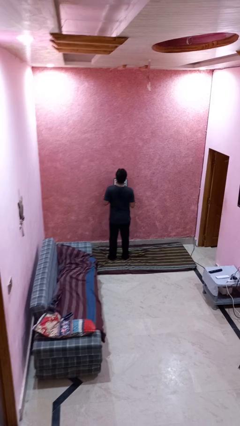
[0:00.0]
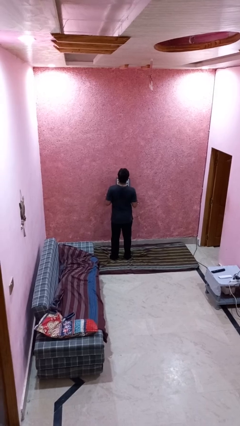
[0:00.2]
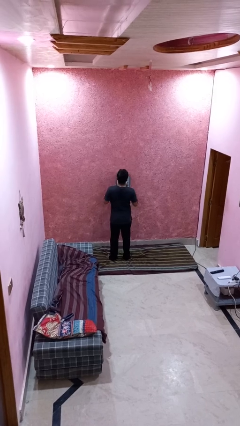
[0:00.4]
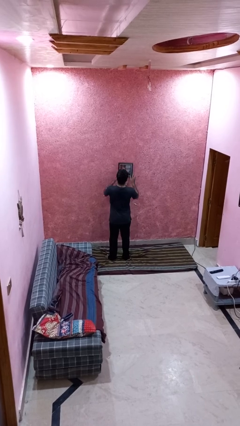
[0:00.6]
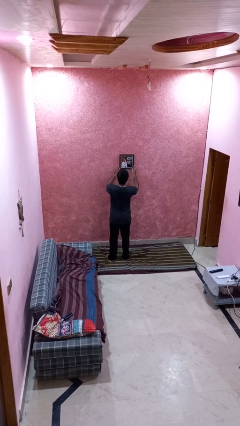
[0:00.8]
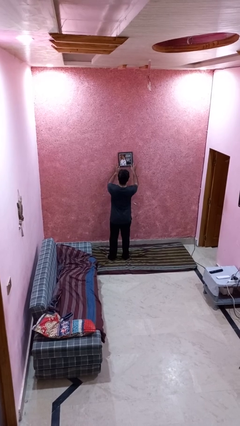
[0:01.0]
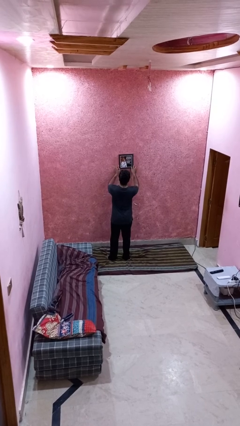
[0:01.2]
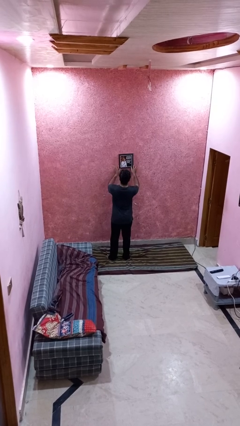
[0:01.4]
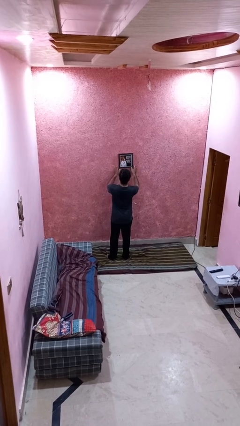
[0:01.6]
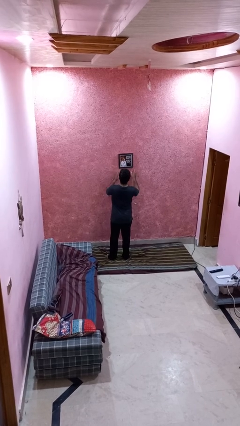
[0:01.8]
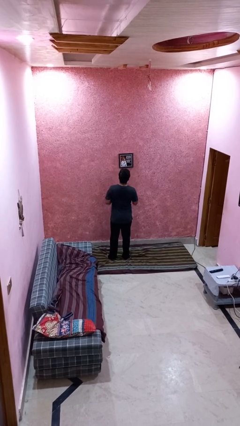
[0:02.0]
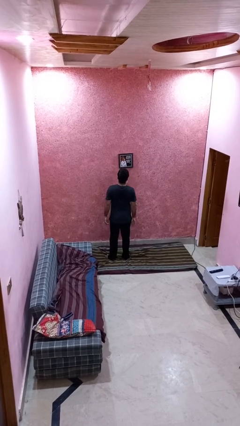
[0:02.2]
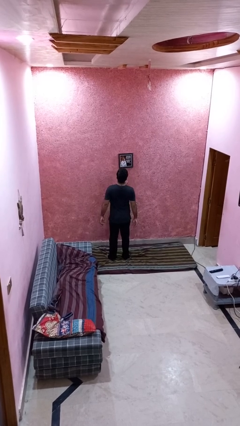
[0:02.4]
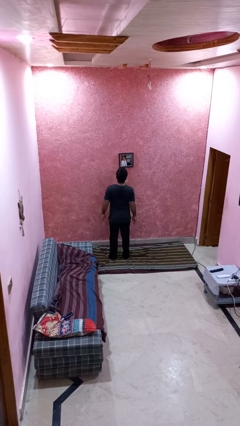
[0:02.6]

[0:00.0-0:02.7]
person puts up picture frame

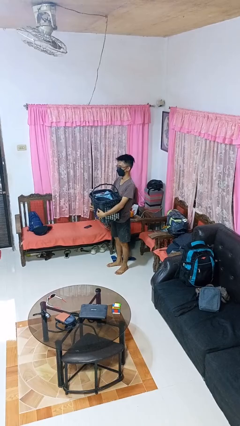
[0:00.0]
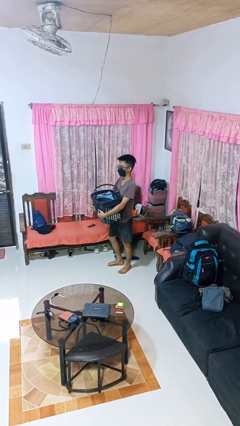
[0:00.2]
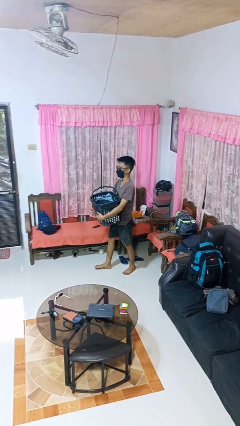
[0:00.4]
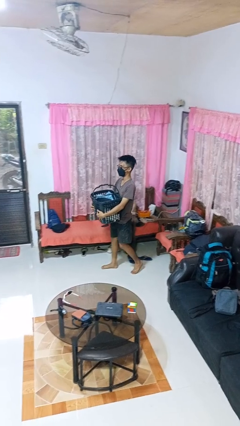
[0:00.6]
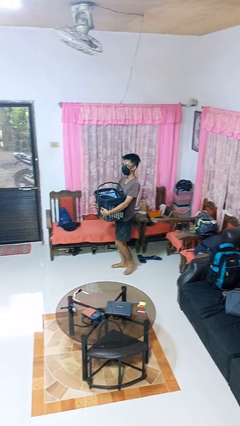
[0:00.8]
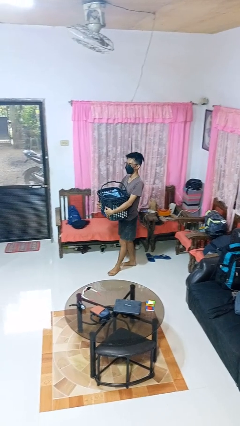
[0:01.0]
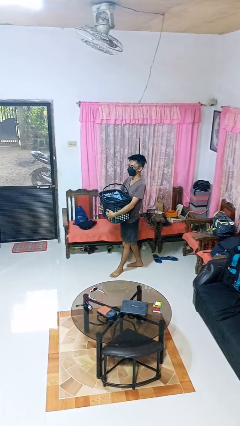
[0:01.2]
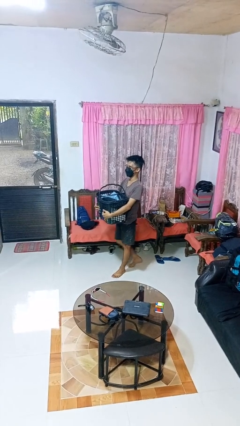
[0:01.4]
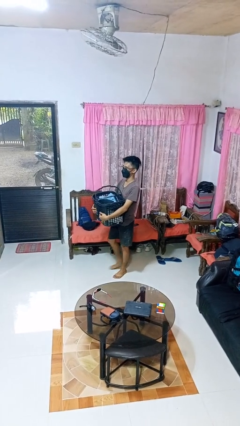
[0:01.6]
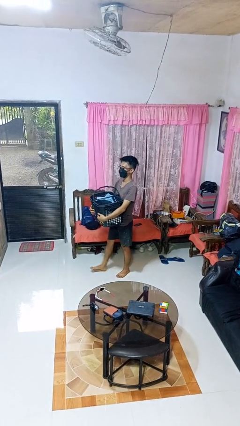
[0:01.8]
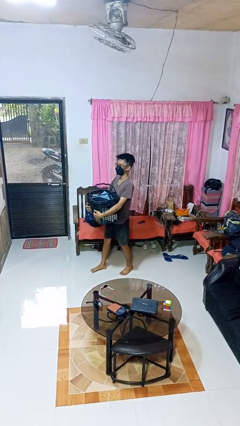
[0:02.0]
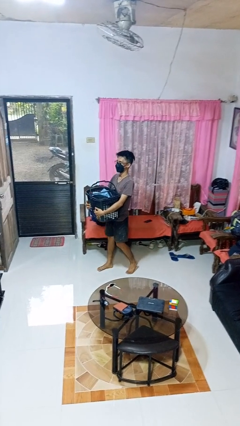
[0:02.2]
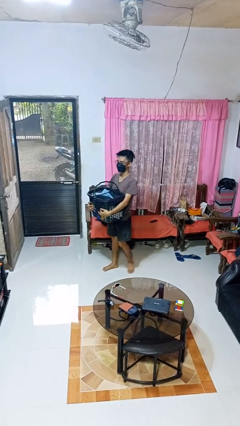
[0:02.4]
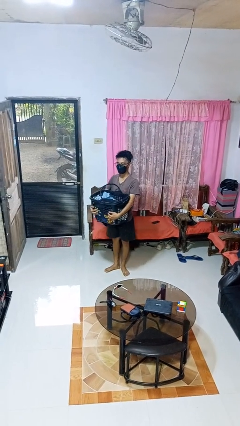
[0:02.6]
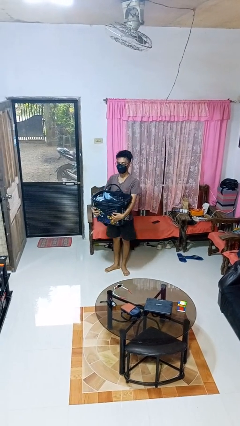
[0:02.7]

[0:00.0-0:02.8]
person carries laundry basket

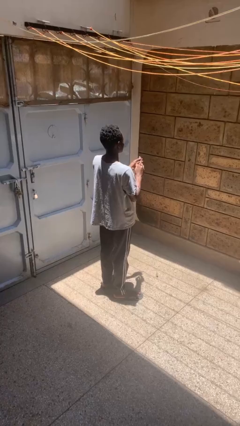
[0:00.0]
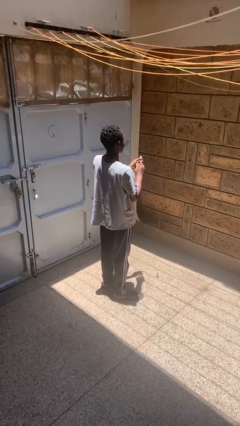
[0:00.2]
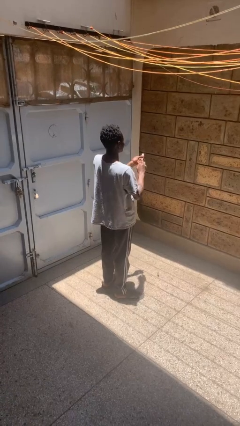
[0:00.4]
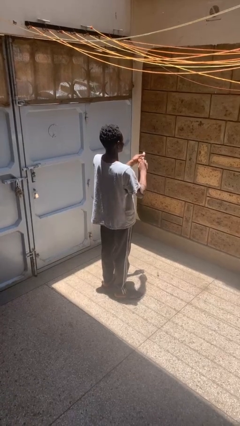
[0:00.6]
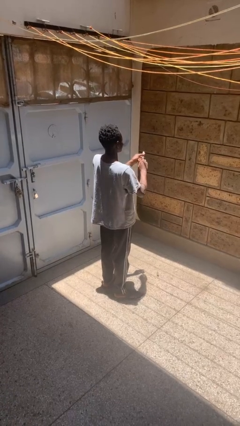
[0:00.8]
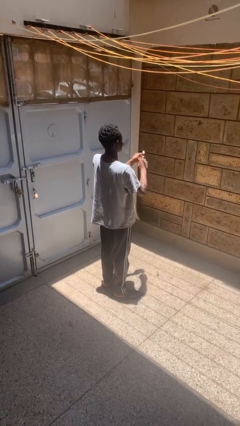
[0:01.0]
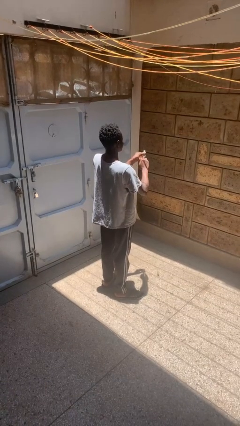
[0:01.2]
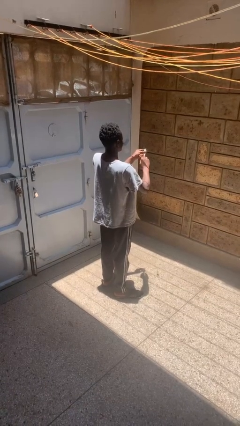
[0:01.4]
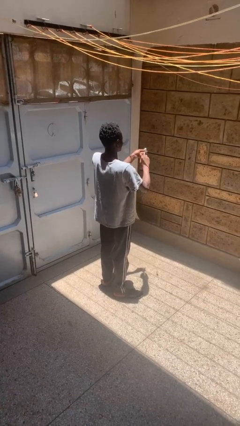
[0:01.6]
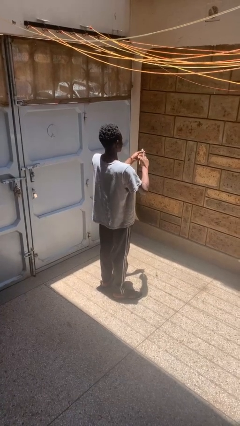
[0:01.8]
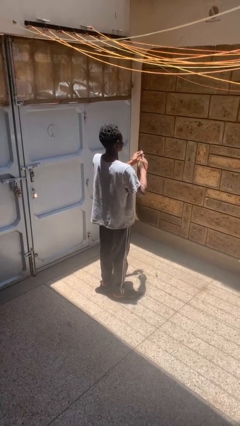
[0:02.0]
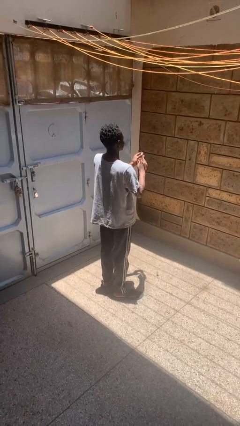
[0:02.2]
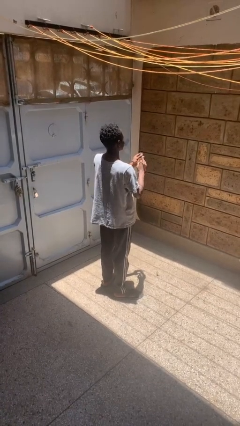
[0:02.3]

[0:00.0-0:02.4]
person clips fingernails

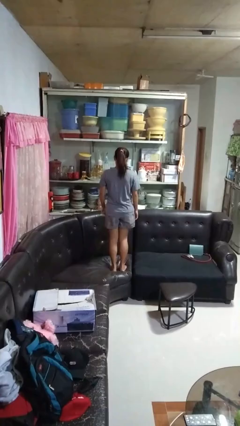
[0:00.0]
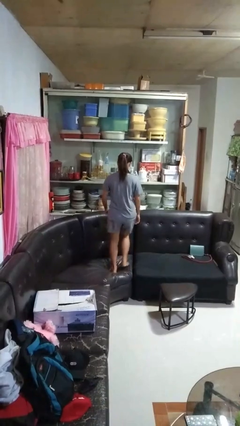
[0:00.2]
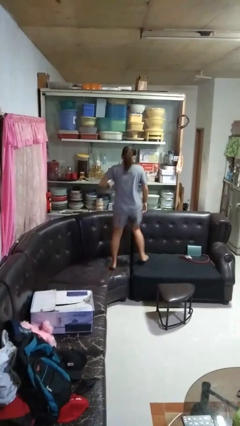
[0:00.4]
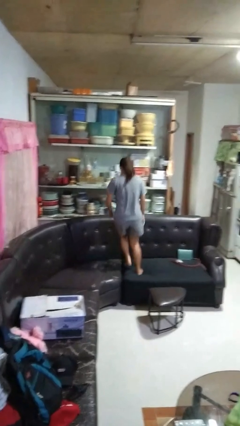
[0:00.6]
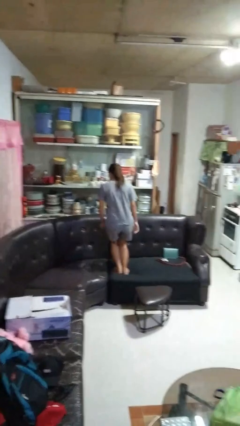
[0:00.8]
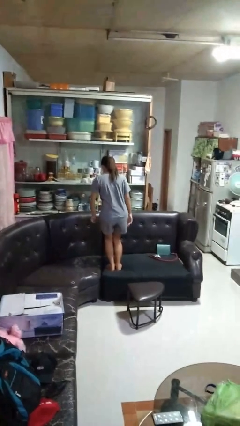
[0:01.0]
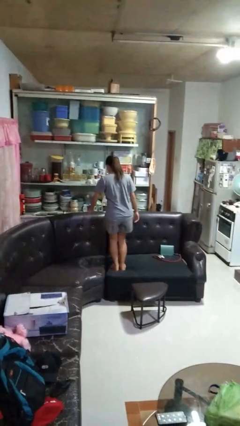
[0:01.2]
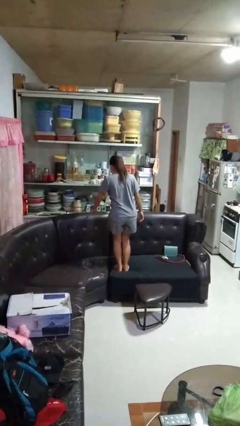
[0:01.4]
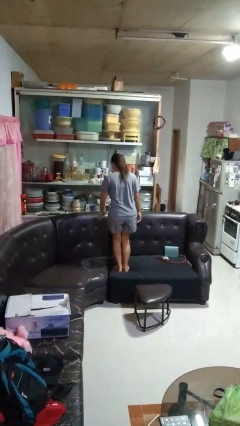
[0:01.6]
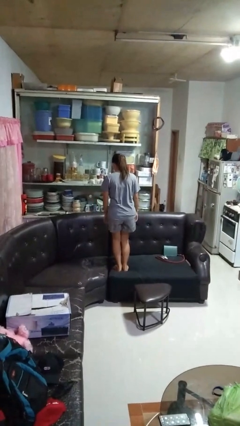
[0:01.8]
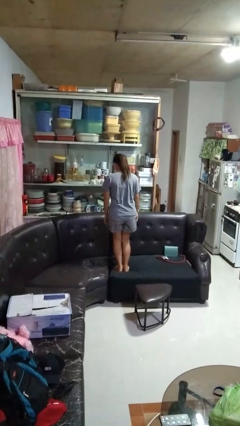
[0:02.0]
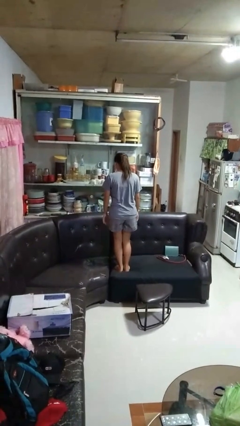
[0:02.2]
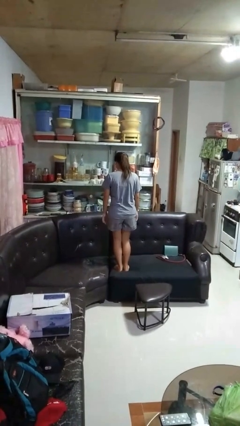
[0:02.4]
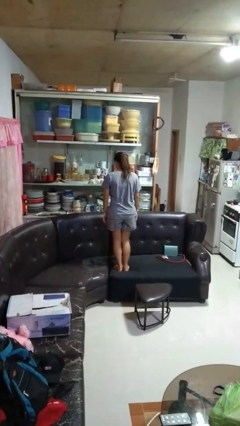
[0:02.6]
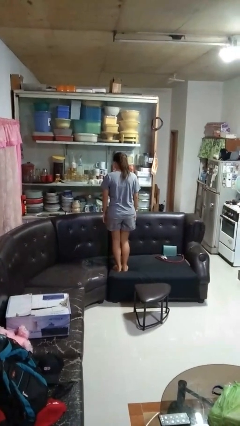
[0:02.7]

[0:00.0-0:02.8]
person jumps on couch

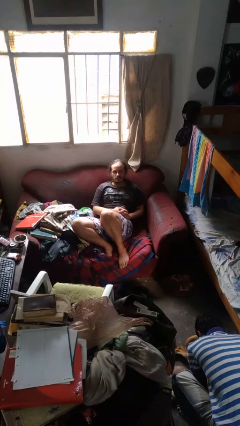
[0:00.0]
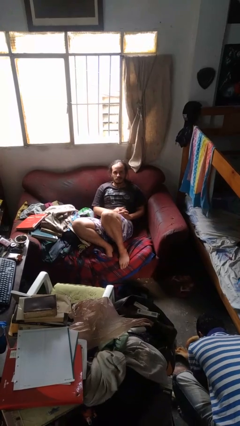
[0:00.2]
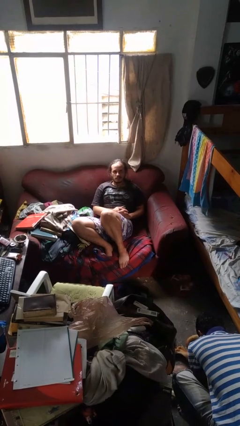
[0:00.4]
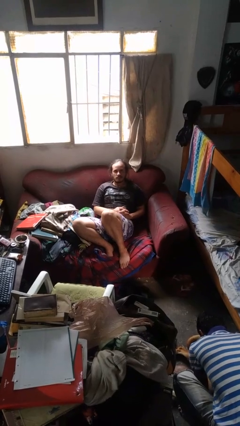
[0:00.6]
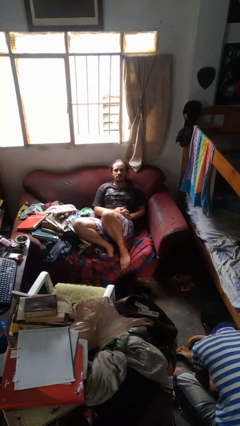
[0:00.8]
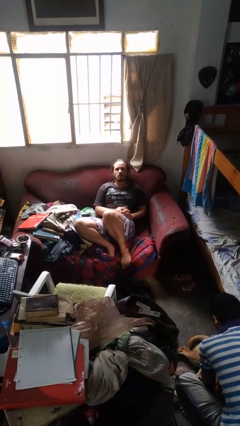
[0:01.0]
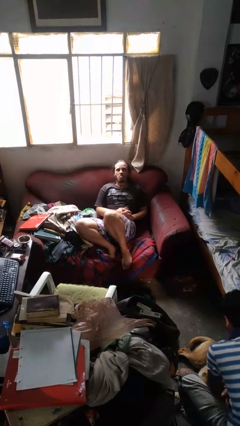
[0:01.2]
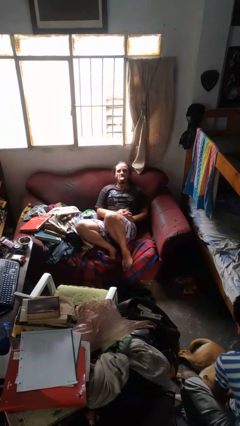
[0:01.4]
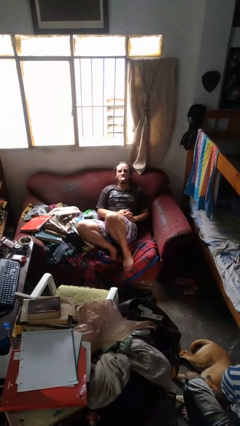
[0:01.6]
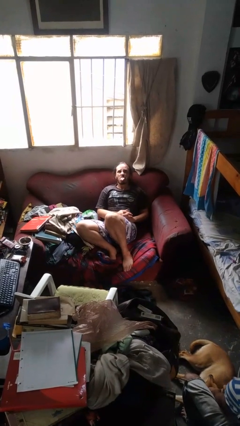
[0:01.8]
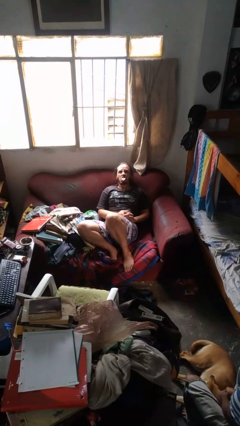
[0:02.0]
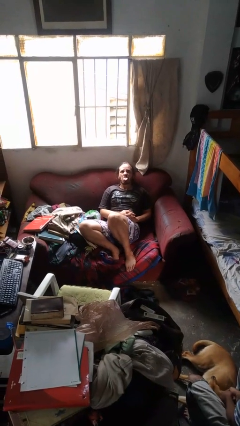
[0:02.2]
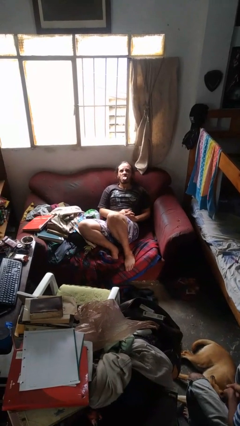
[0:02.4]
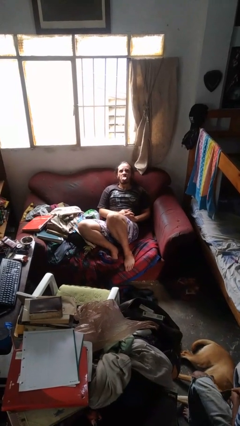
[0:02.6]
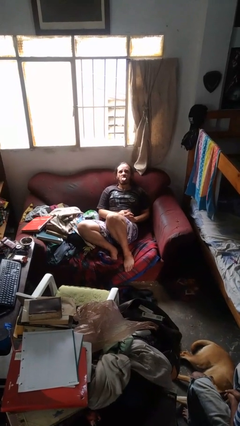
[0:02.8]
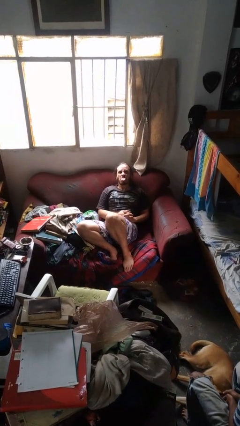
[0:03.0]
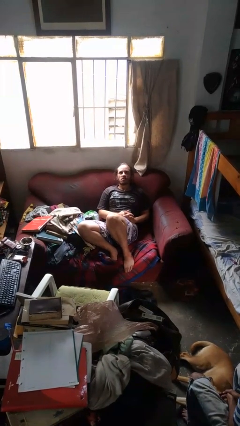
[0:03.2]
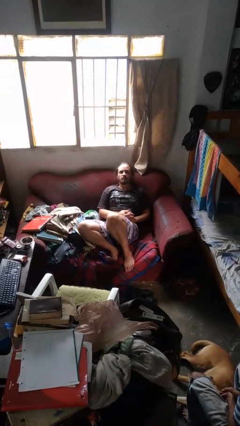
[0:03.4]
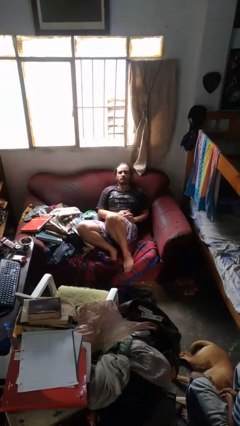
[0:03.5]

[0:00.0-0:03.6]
person sticks out tongue

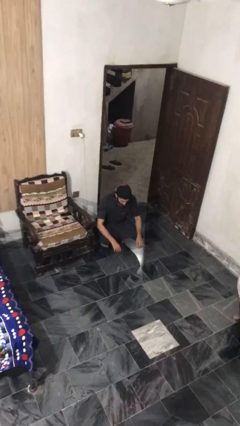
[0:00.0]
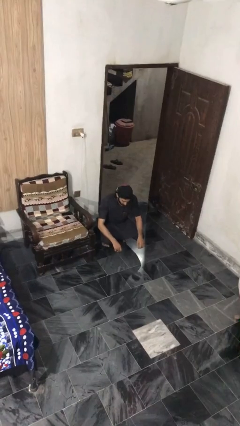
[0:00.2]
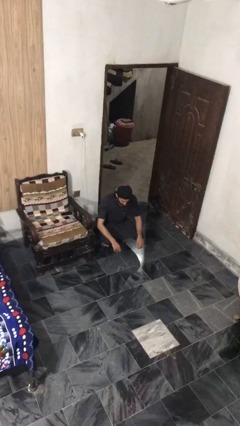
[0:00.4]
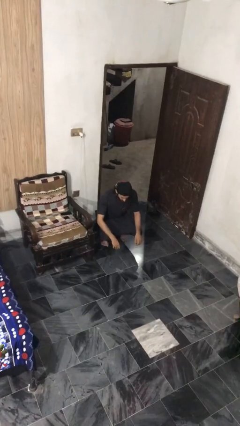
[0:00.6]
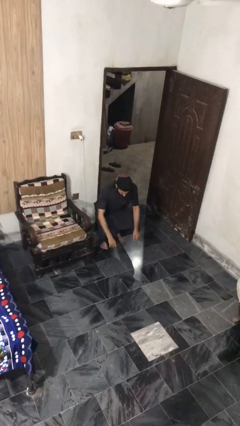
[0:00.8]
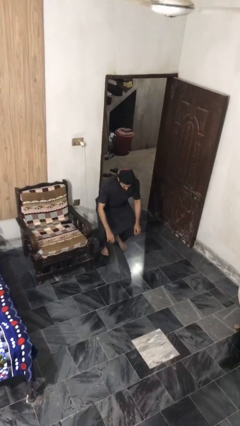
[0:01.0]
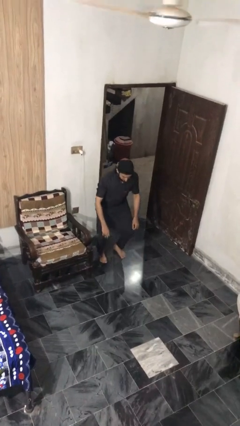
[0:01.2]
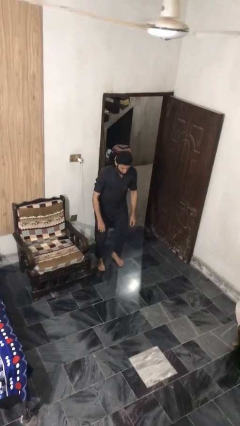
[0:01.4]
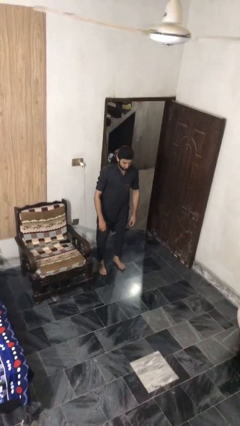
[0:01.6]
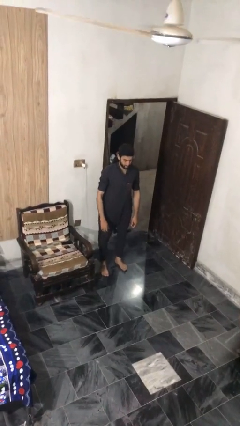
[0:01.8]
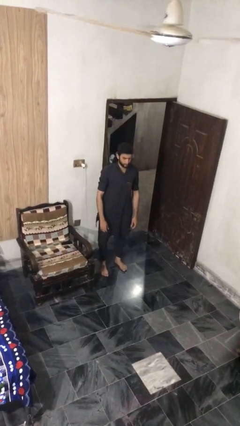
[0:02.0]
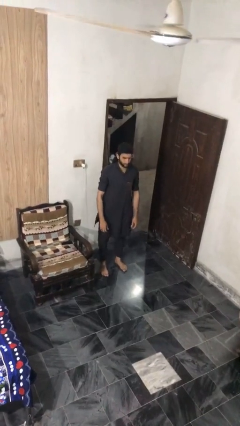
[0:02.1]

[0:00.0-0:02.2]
person stands up

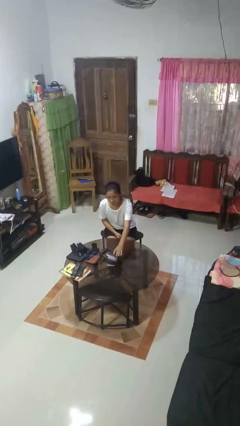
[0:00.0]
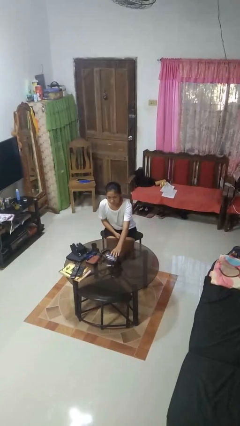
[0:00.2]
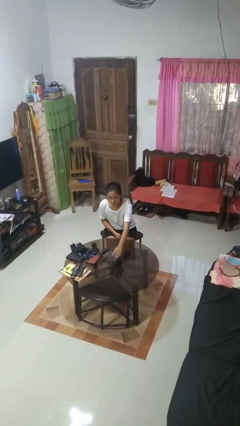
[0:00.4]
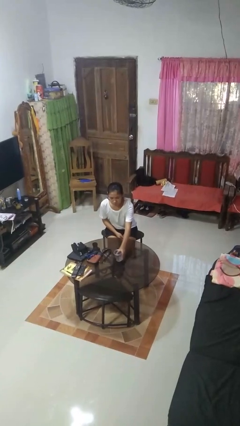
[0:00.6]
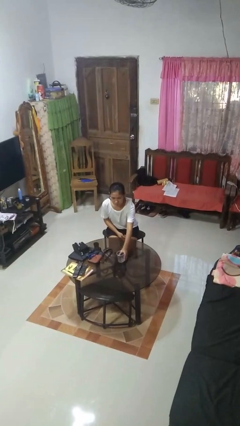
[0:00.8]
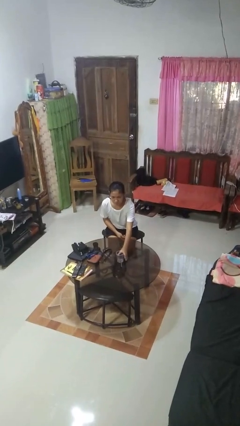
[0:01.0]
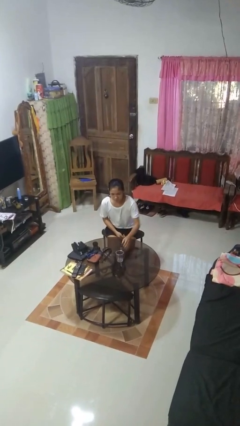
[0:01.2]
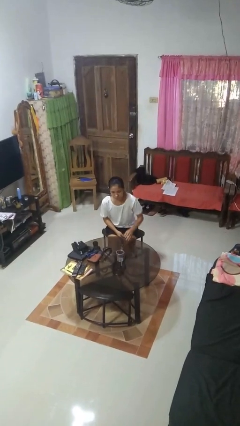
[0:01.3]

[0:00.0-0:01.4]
person sets upright glass
